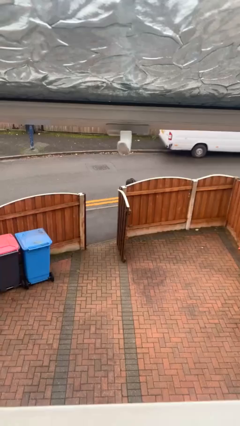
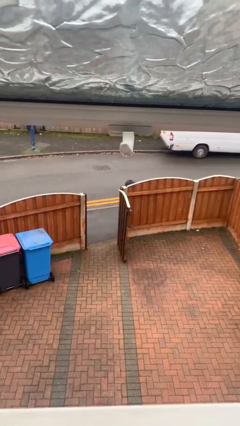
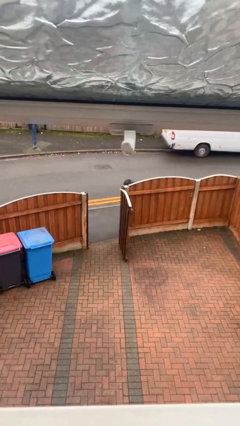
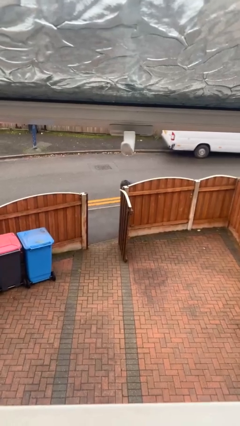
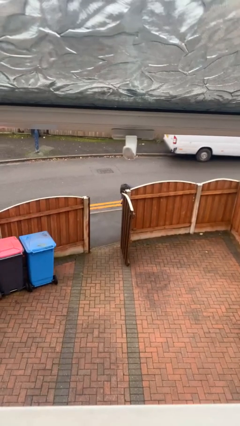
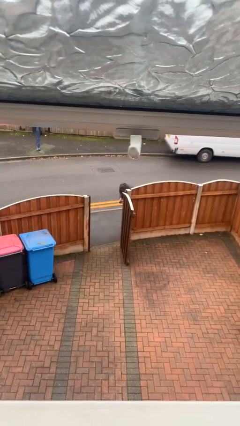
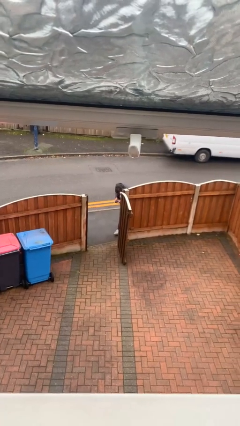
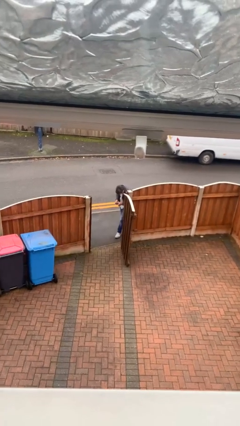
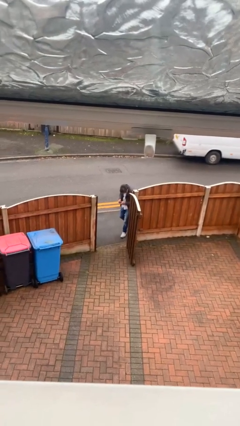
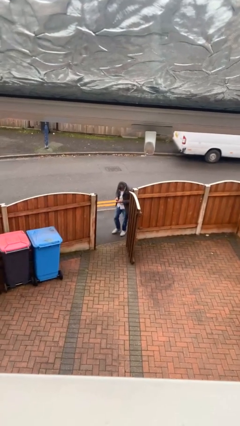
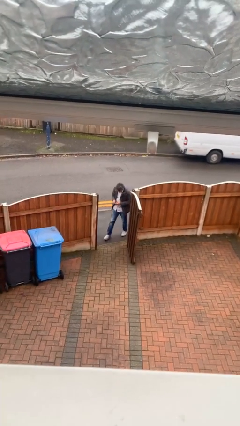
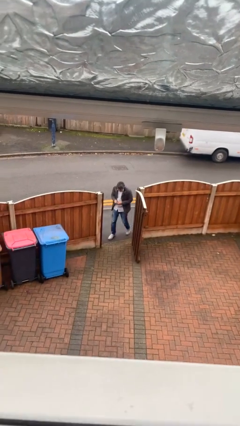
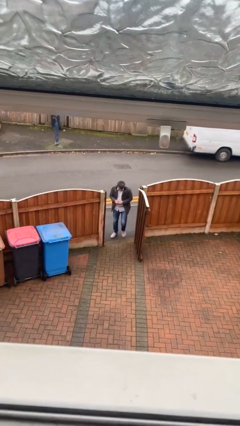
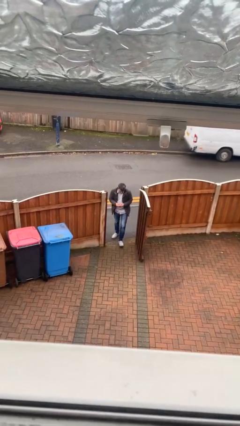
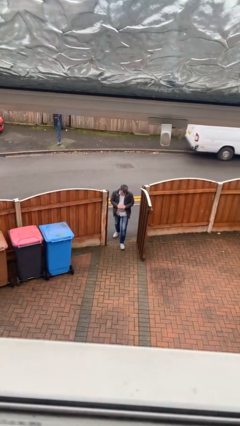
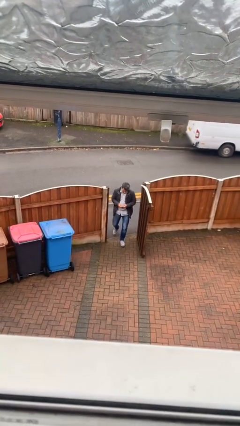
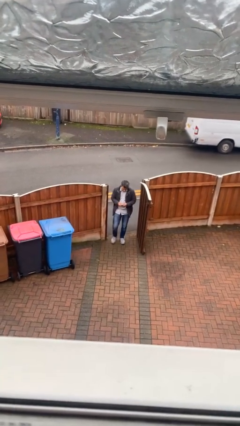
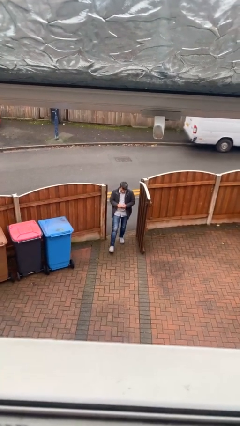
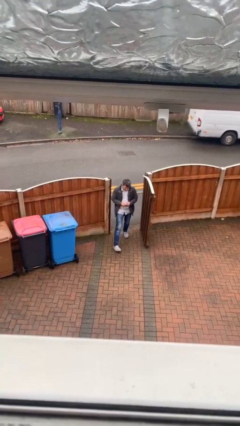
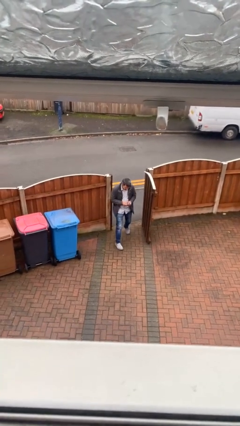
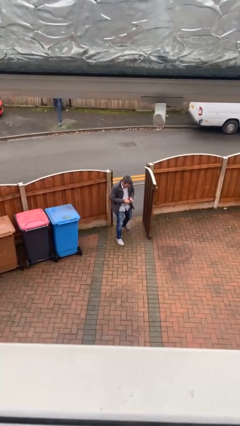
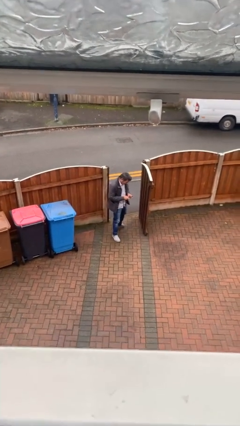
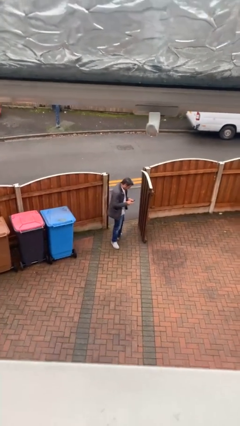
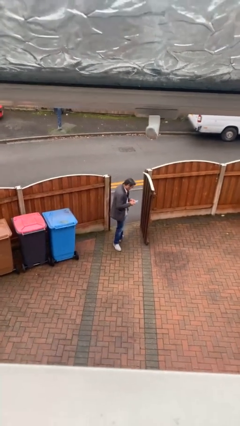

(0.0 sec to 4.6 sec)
person enters scene through structure

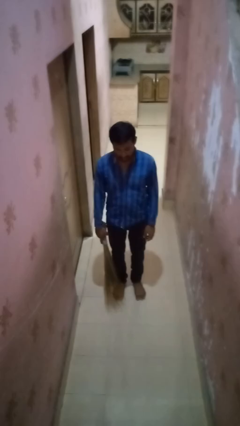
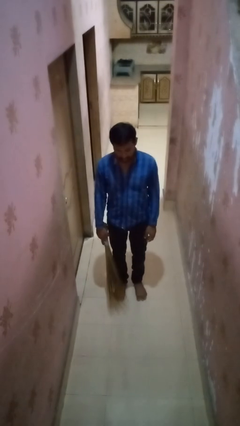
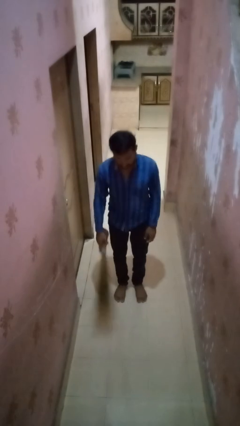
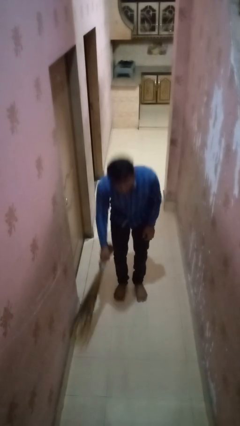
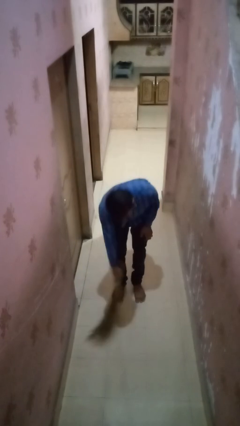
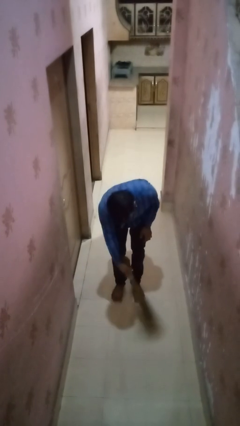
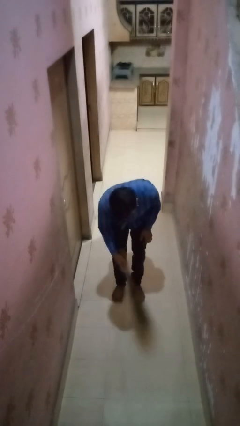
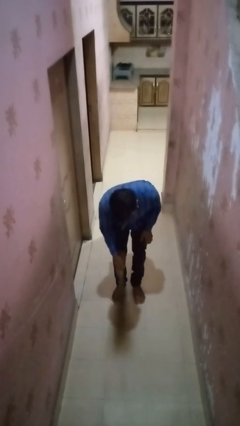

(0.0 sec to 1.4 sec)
person sweeps floor

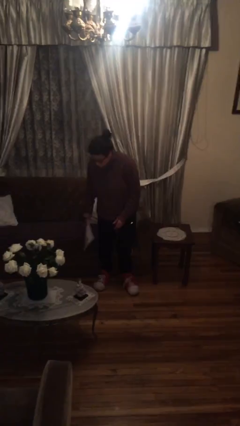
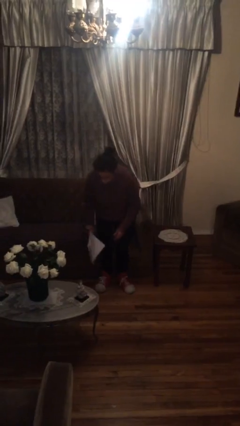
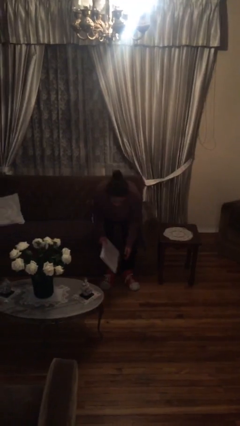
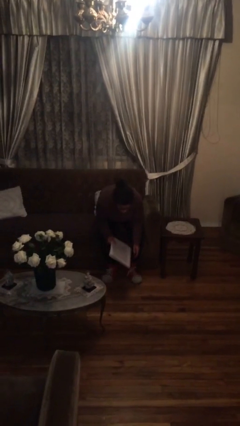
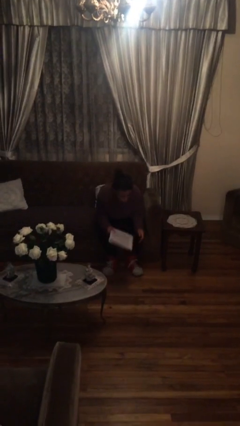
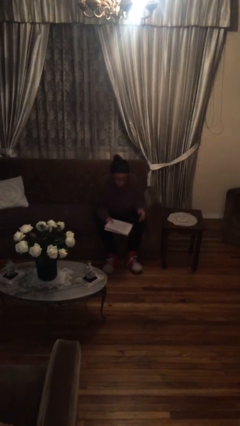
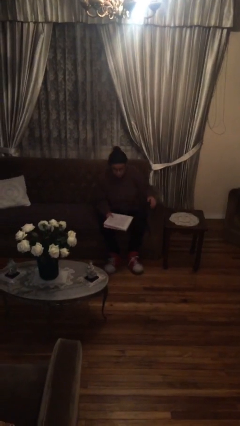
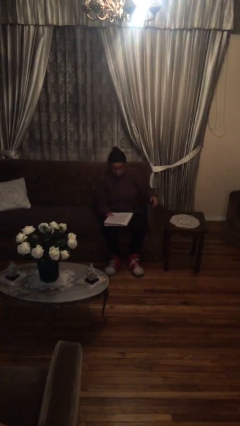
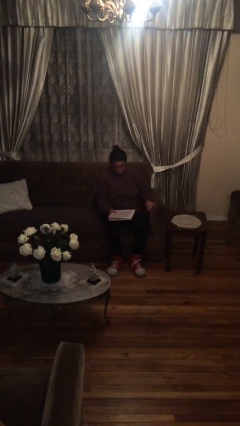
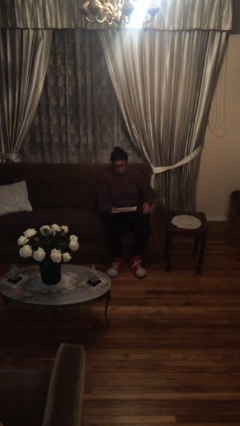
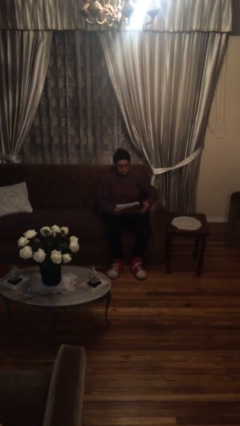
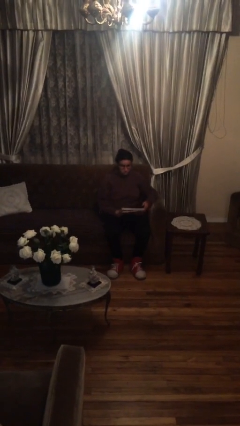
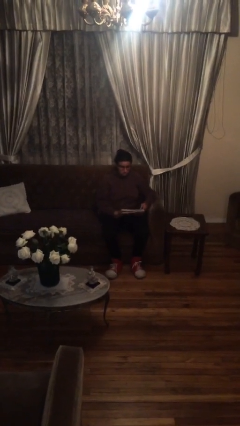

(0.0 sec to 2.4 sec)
person sits down

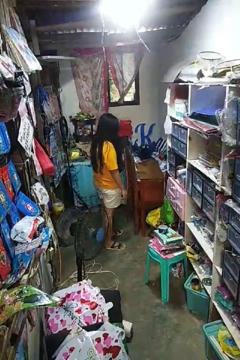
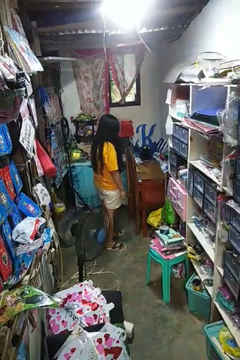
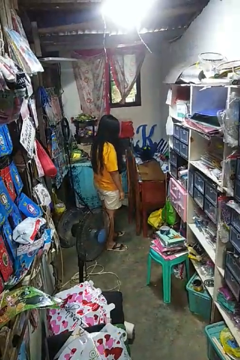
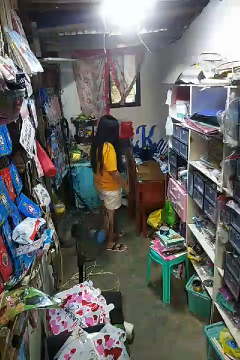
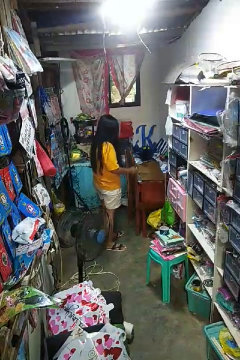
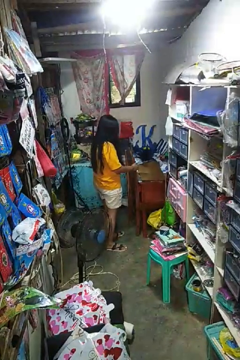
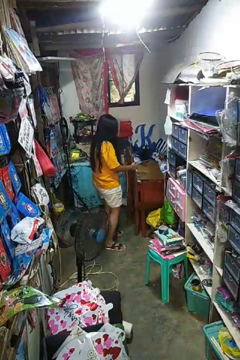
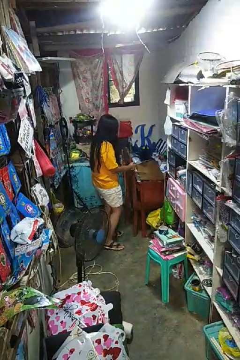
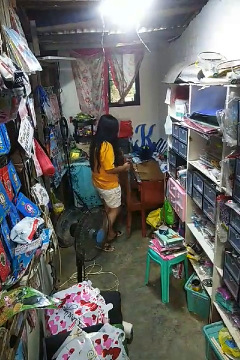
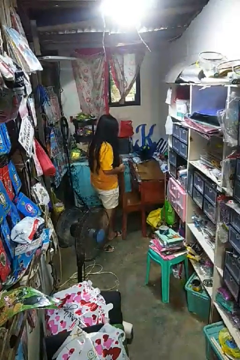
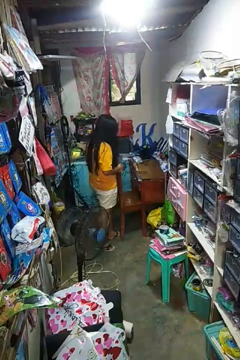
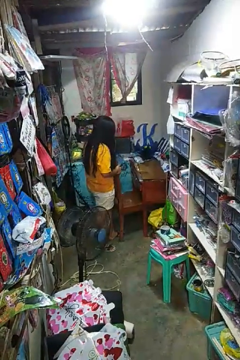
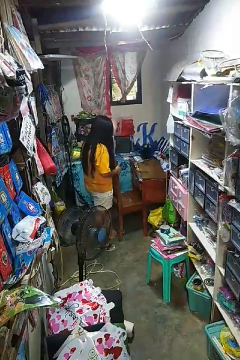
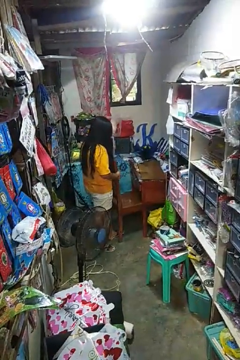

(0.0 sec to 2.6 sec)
person pulls out chair

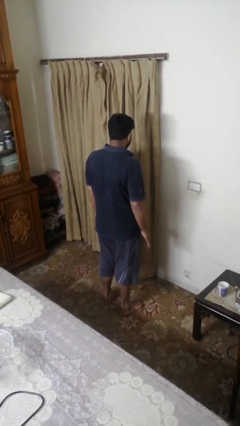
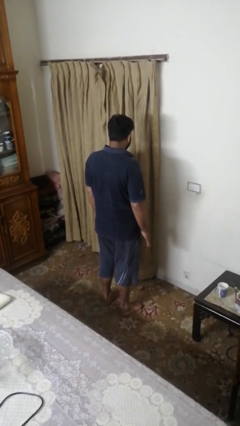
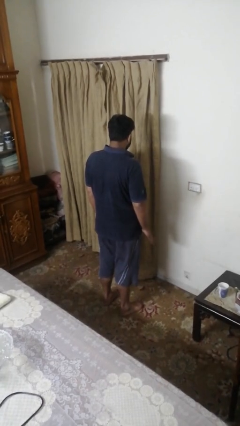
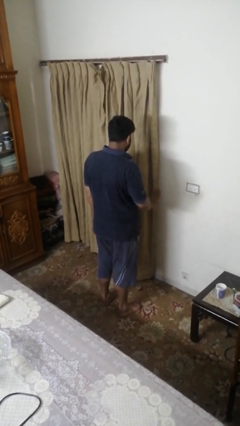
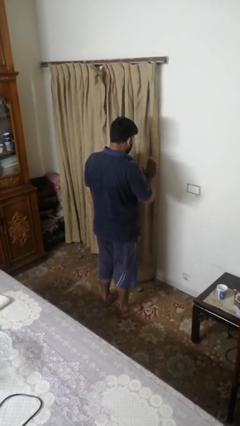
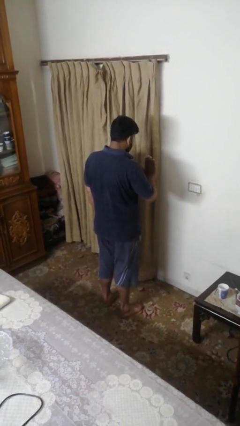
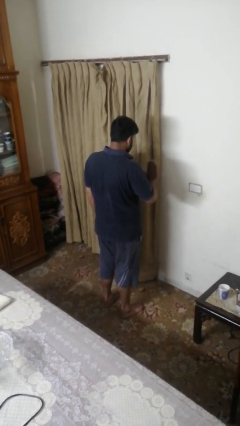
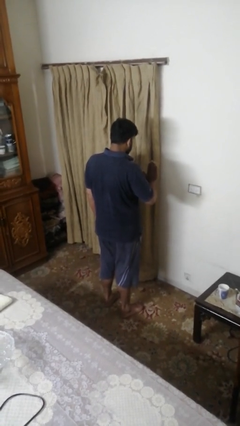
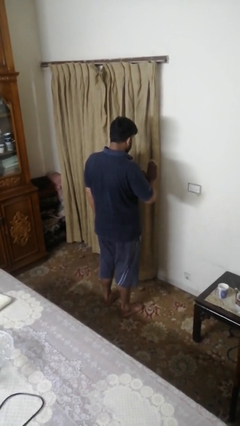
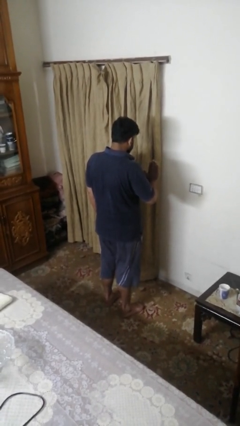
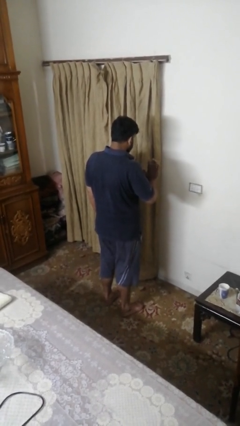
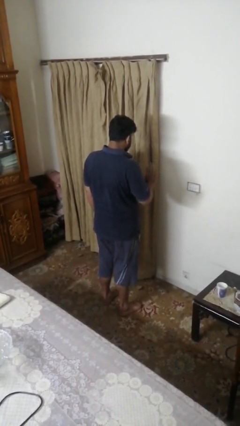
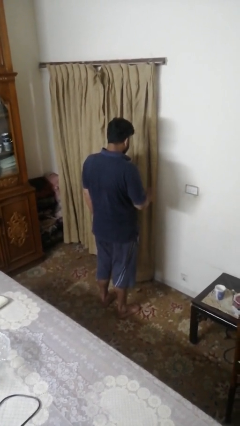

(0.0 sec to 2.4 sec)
person gestures stop

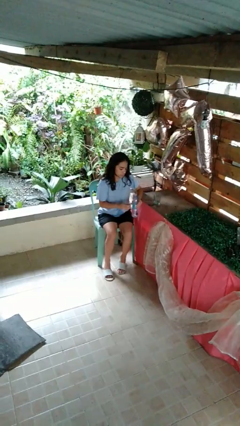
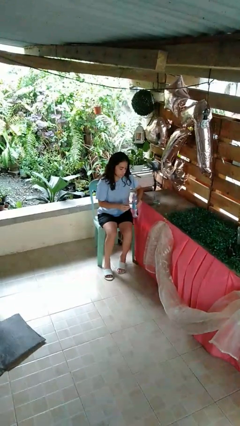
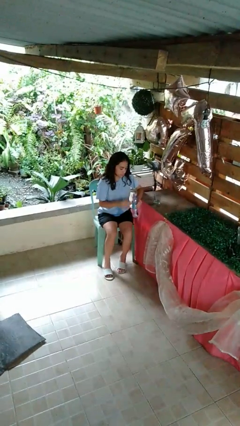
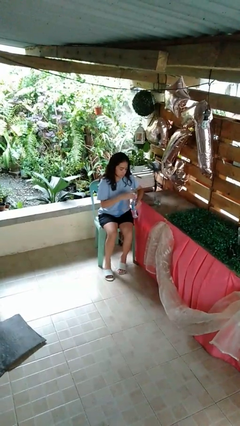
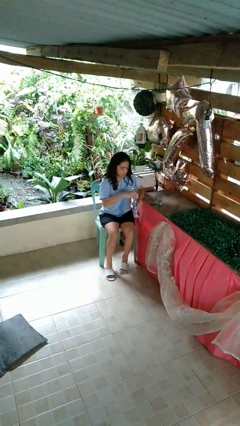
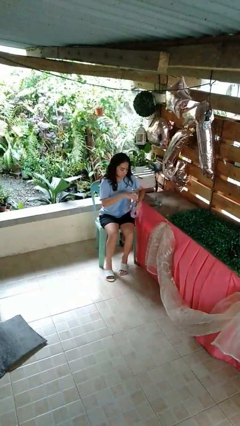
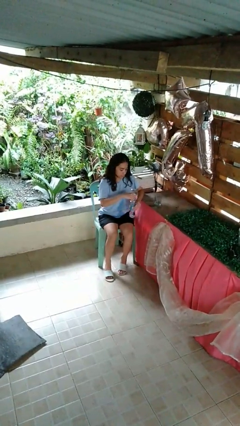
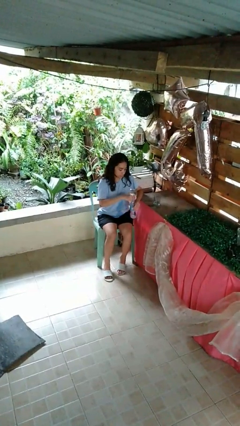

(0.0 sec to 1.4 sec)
person screws lid to bottle

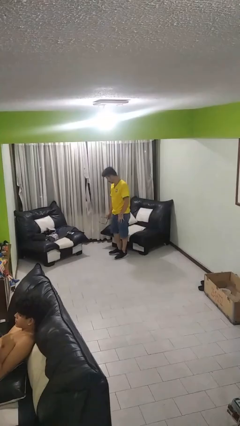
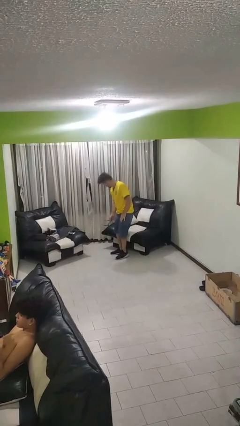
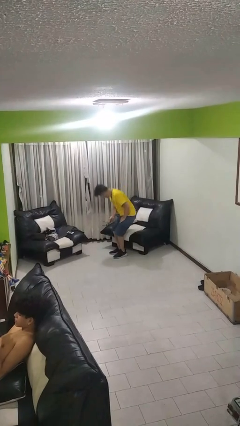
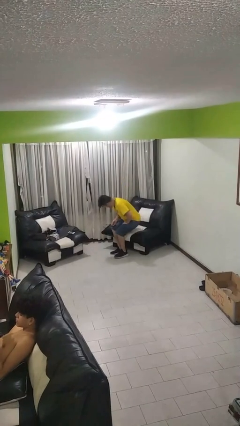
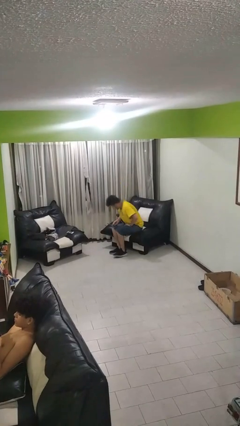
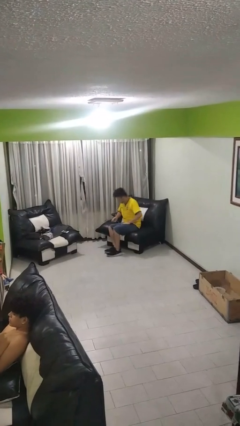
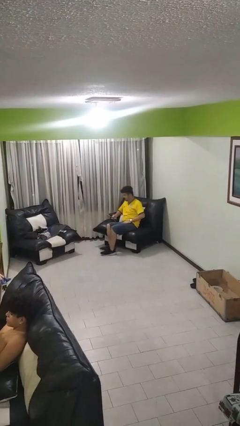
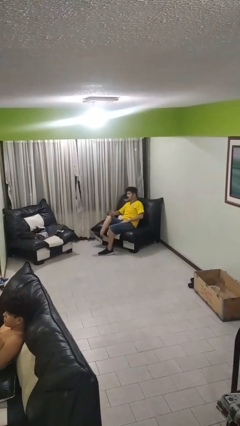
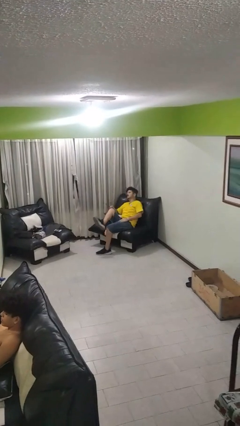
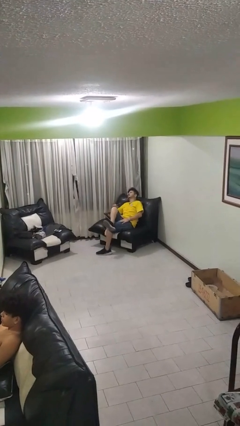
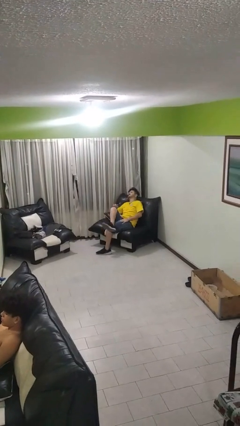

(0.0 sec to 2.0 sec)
person lies down on couch

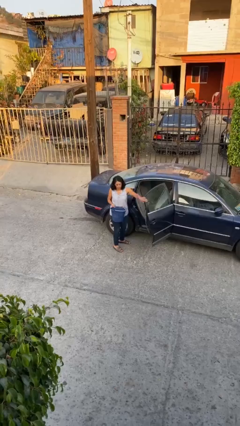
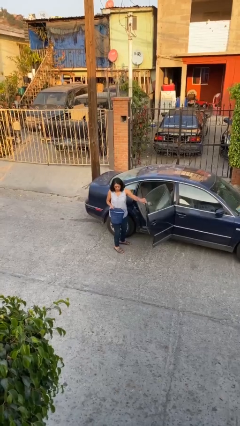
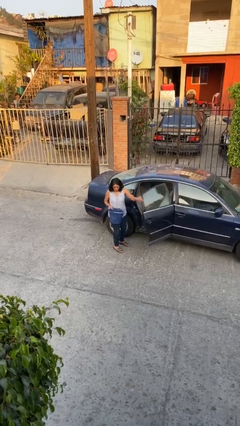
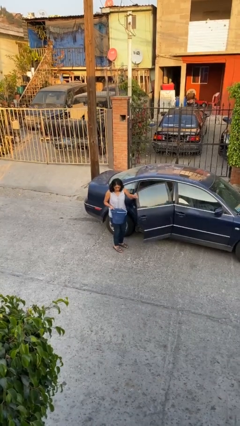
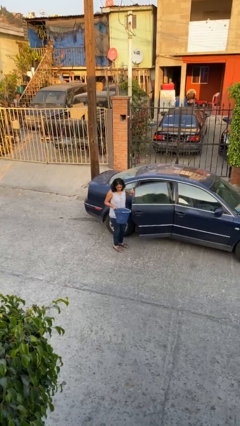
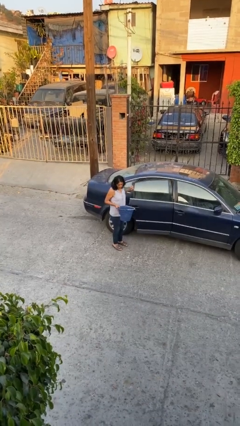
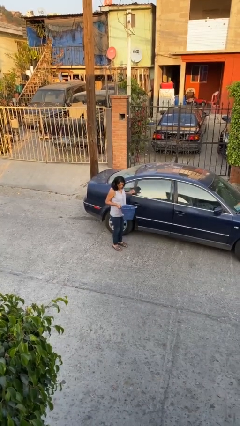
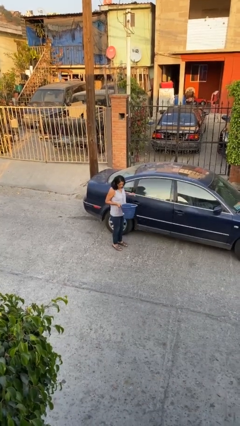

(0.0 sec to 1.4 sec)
person closes car door
